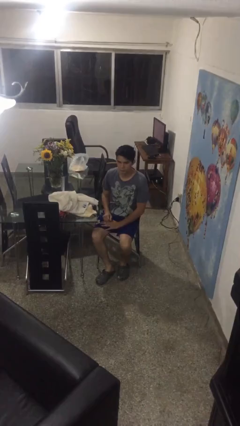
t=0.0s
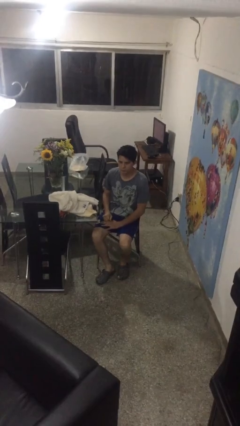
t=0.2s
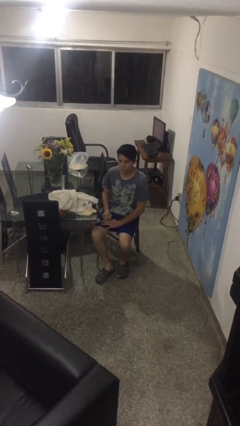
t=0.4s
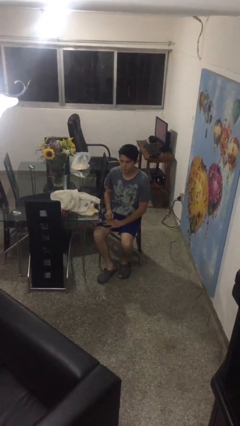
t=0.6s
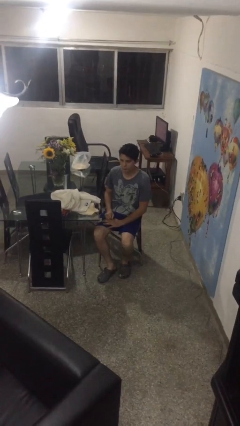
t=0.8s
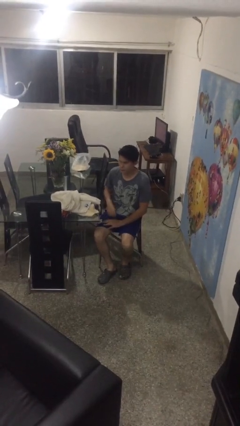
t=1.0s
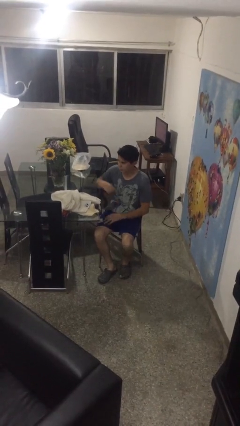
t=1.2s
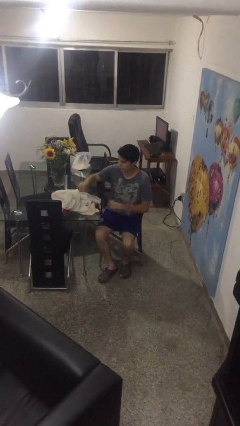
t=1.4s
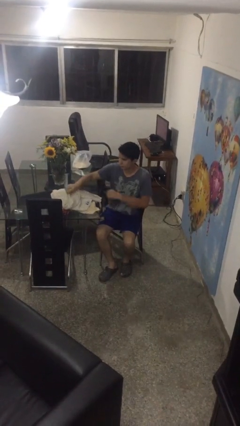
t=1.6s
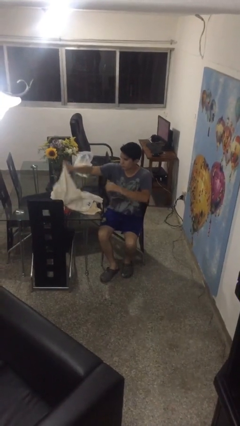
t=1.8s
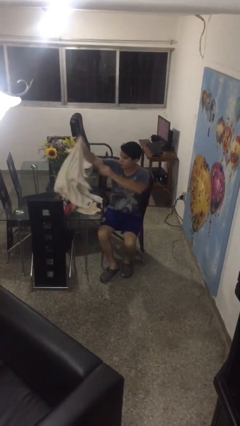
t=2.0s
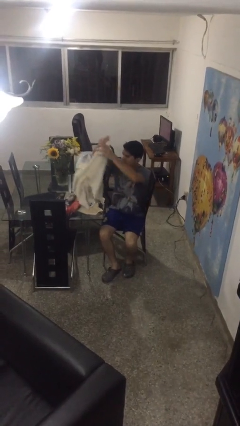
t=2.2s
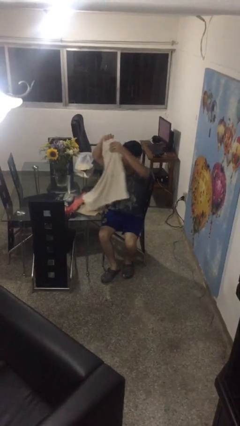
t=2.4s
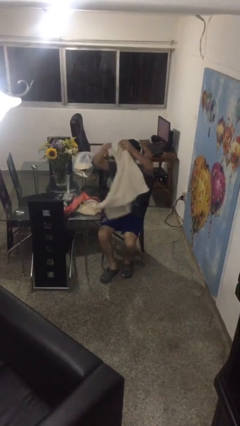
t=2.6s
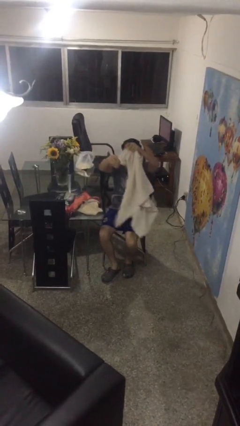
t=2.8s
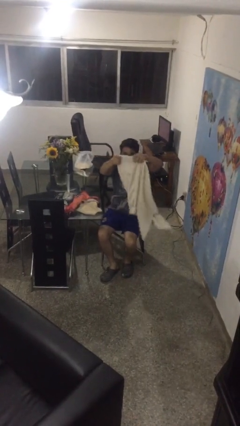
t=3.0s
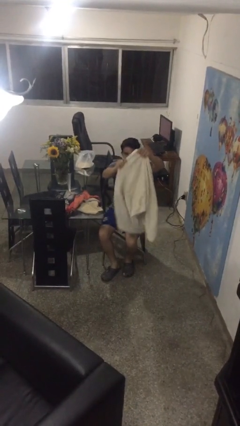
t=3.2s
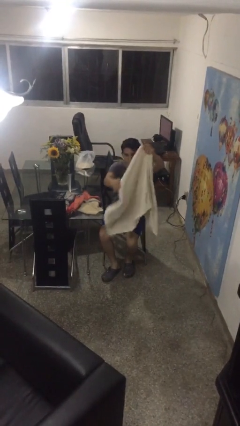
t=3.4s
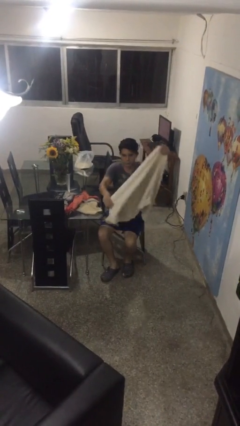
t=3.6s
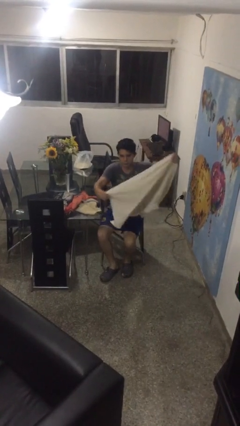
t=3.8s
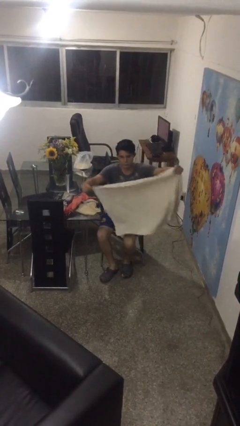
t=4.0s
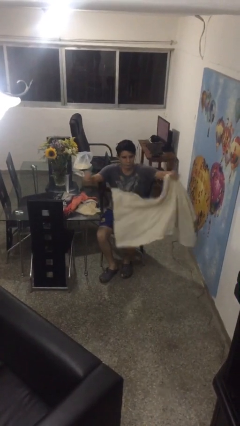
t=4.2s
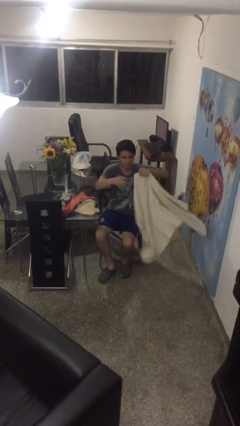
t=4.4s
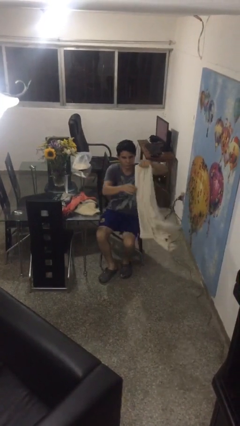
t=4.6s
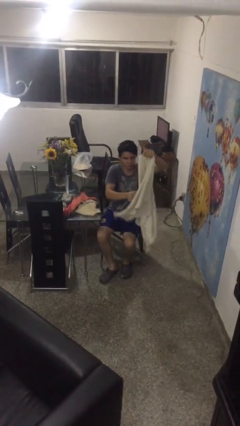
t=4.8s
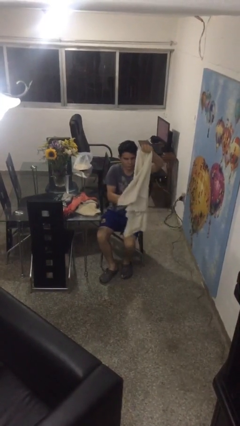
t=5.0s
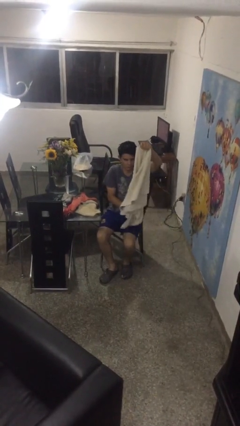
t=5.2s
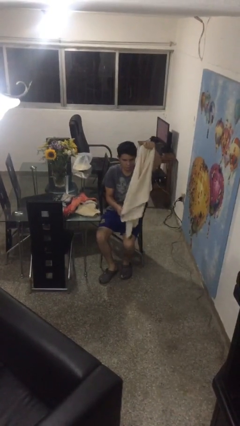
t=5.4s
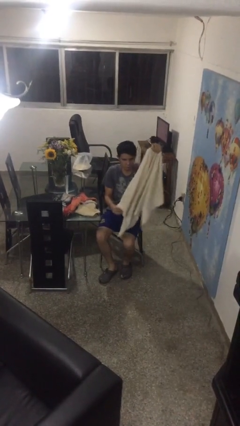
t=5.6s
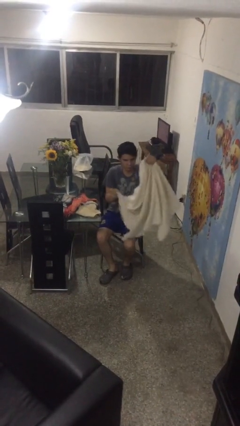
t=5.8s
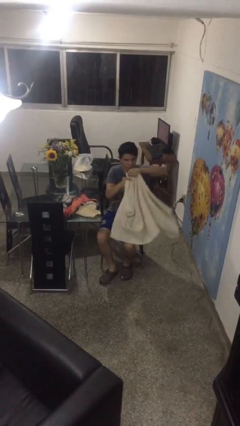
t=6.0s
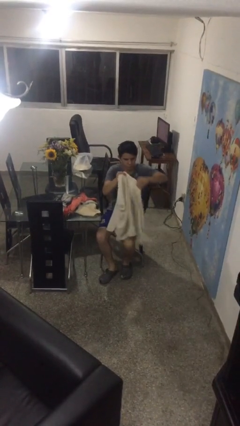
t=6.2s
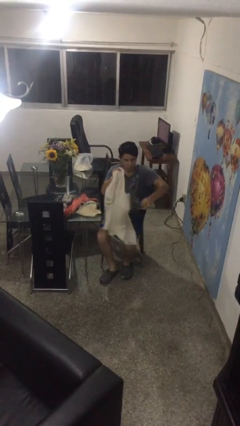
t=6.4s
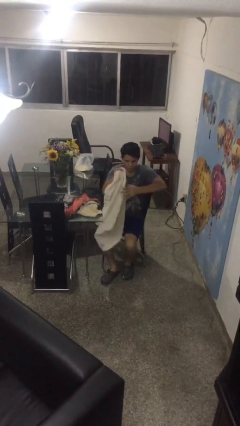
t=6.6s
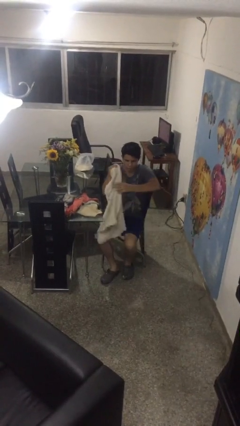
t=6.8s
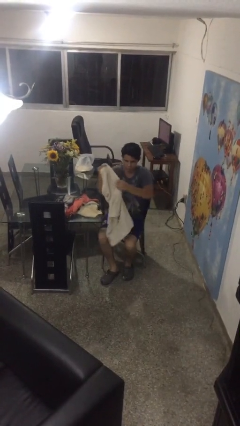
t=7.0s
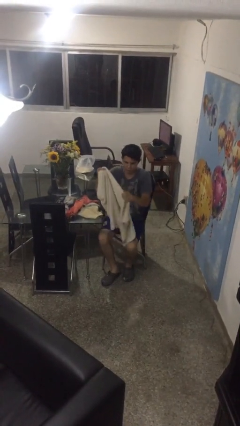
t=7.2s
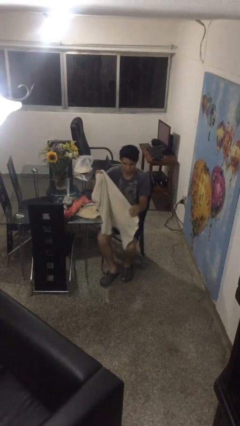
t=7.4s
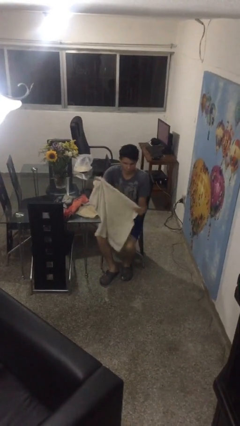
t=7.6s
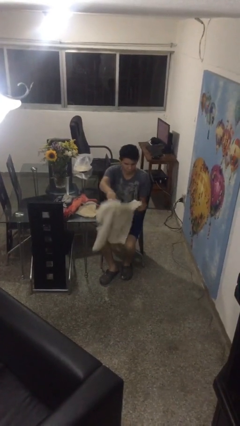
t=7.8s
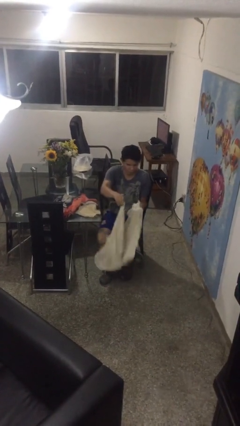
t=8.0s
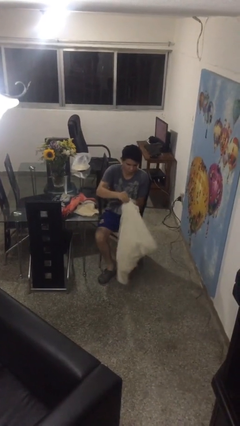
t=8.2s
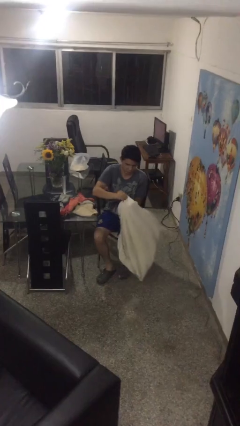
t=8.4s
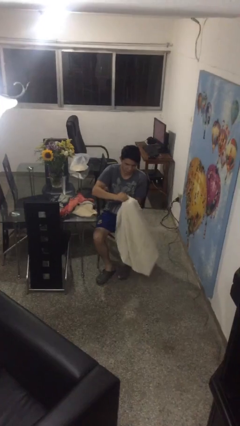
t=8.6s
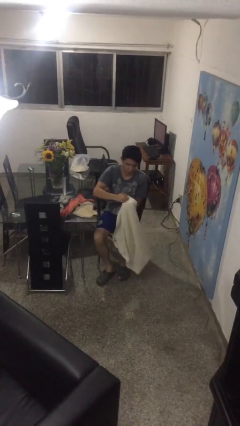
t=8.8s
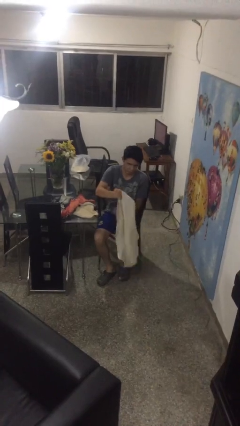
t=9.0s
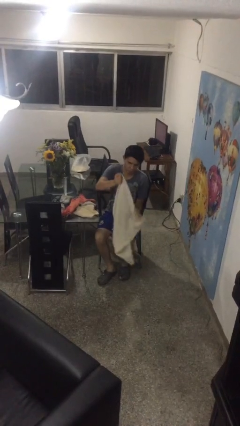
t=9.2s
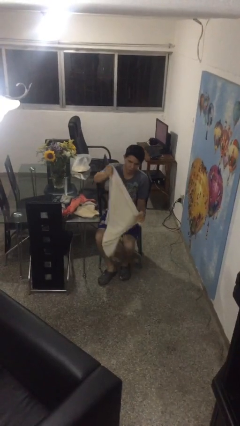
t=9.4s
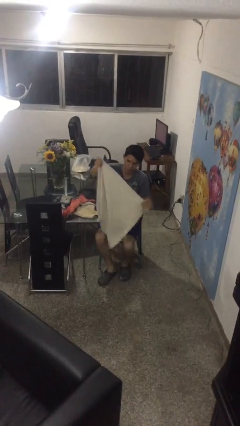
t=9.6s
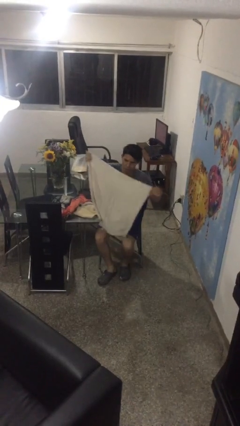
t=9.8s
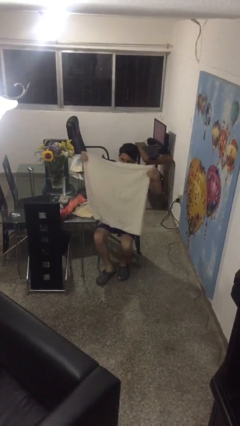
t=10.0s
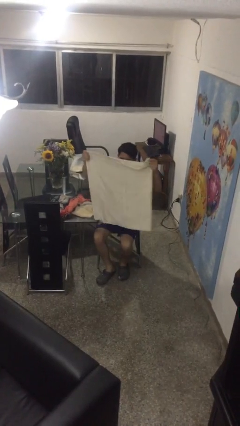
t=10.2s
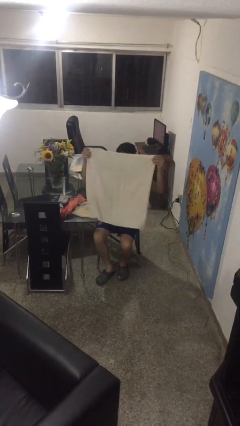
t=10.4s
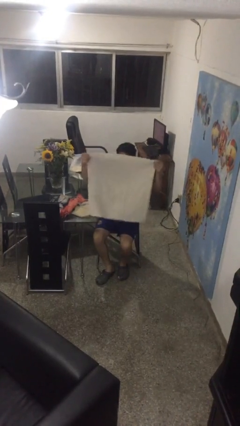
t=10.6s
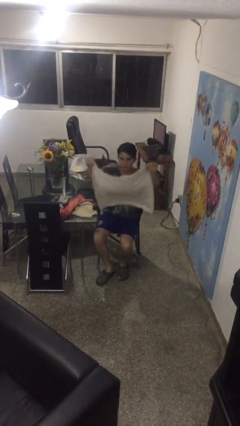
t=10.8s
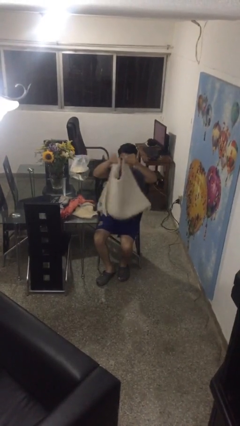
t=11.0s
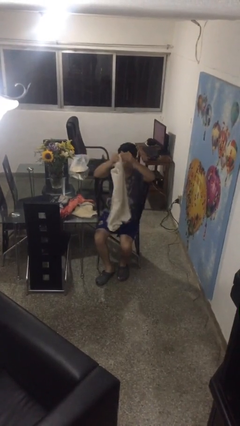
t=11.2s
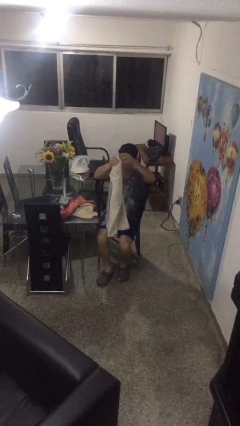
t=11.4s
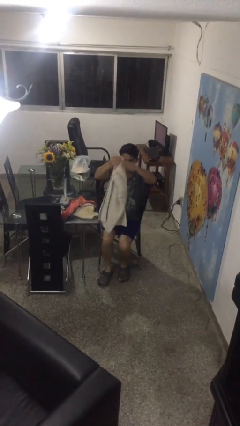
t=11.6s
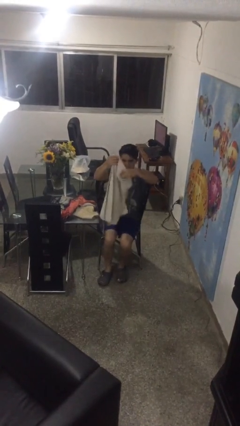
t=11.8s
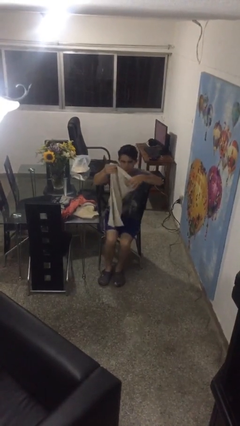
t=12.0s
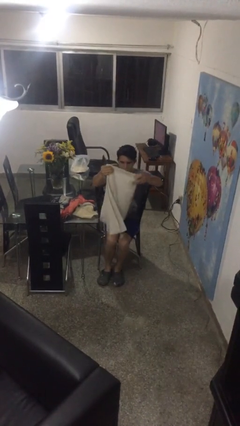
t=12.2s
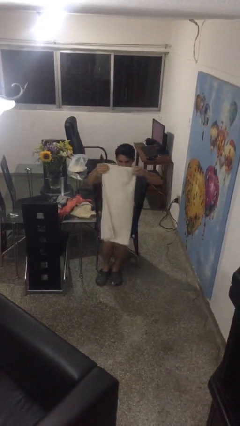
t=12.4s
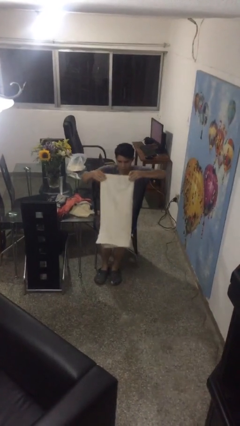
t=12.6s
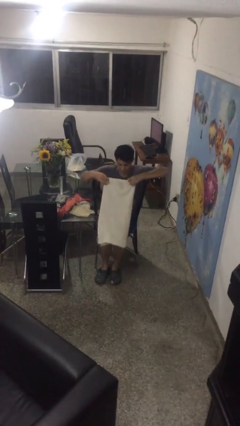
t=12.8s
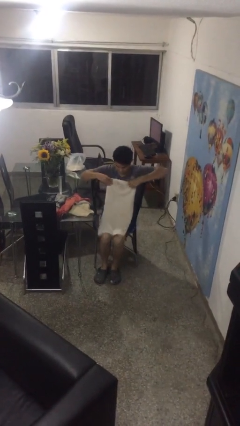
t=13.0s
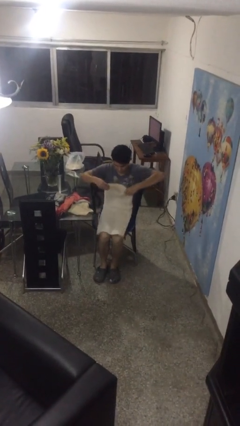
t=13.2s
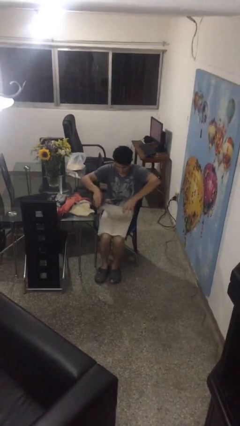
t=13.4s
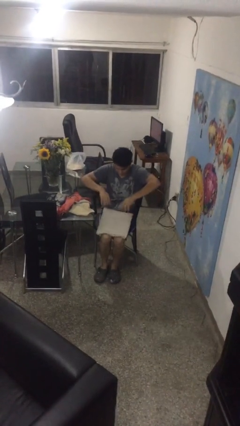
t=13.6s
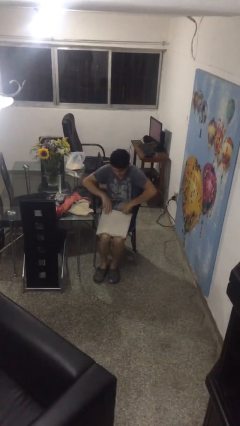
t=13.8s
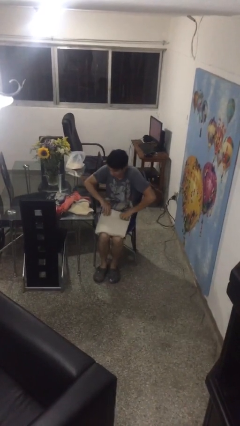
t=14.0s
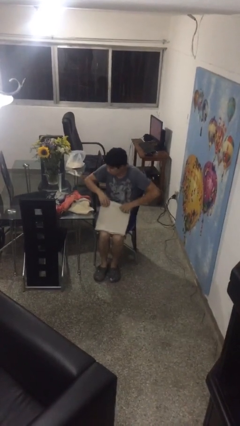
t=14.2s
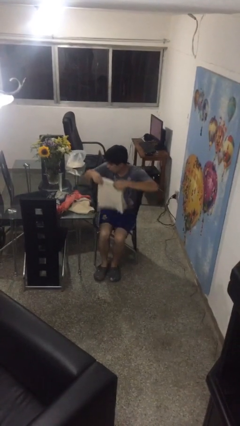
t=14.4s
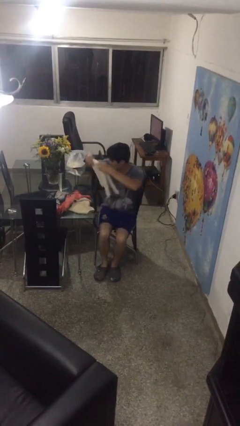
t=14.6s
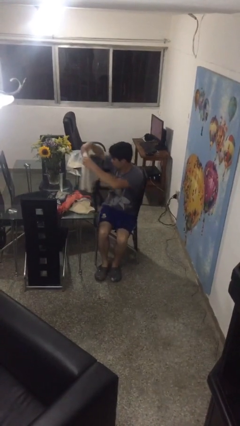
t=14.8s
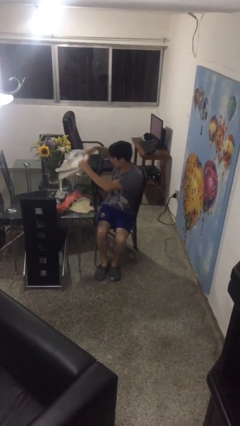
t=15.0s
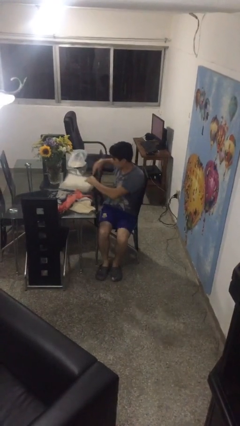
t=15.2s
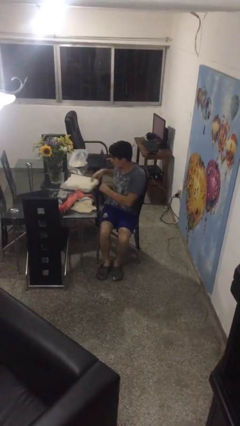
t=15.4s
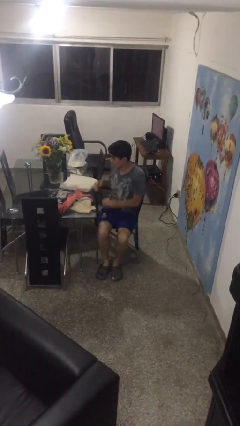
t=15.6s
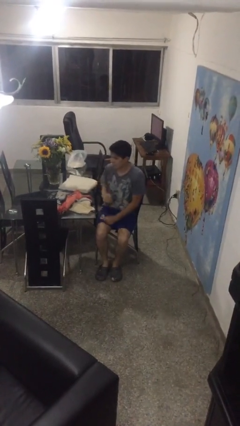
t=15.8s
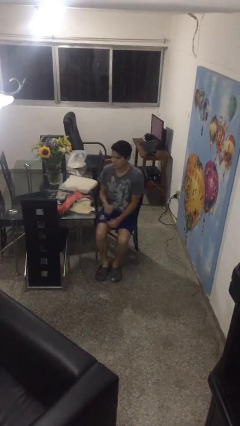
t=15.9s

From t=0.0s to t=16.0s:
person folds towel

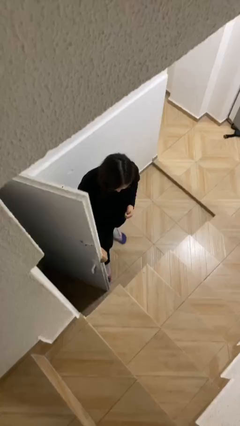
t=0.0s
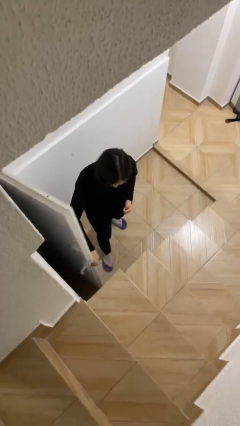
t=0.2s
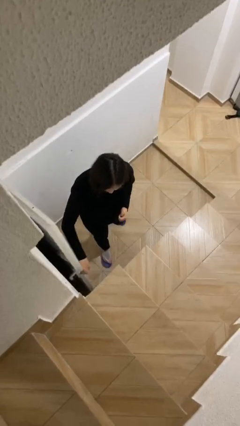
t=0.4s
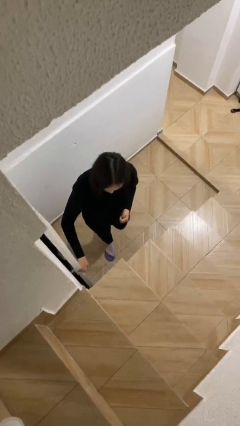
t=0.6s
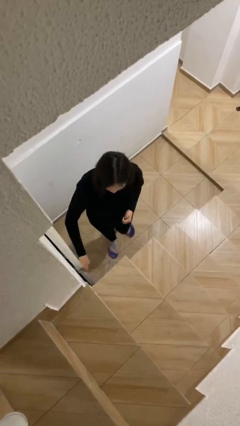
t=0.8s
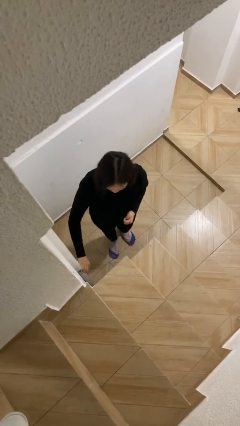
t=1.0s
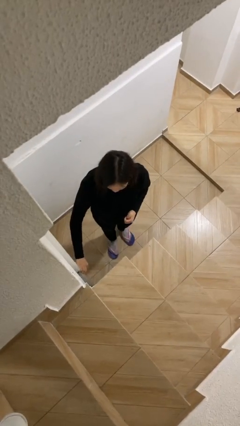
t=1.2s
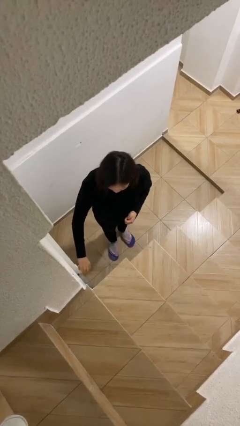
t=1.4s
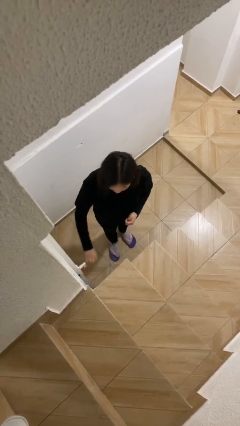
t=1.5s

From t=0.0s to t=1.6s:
person closes facility door
